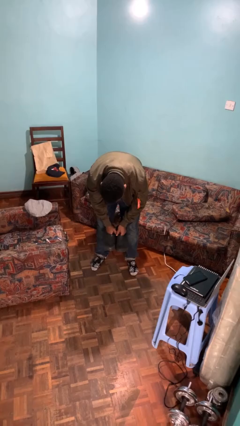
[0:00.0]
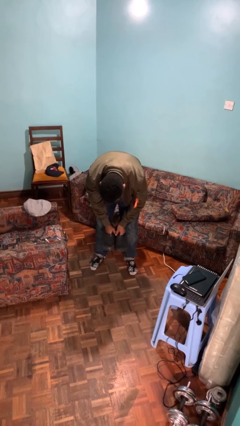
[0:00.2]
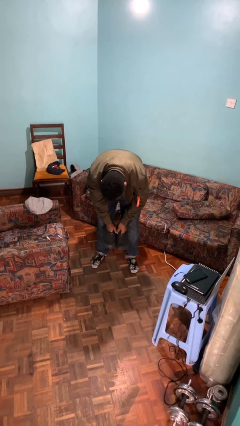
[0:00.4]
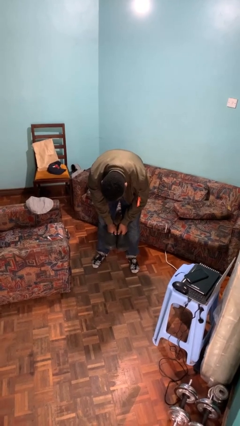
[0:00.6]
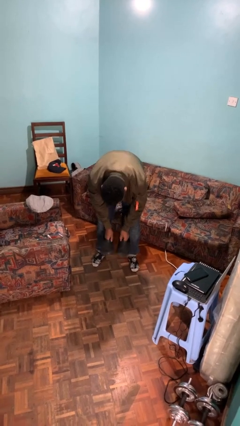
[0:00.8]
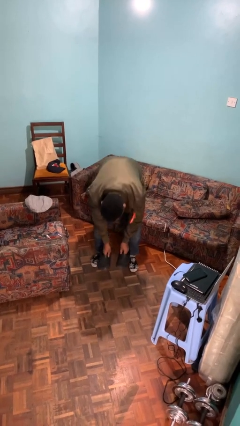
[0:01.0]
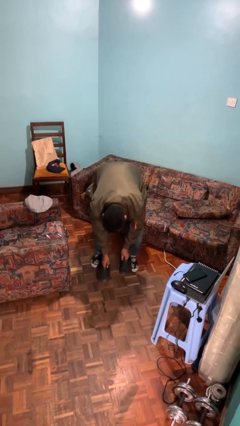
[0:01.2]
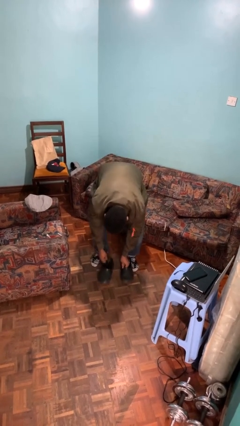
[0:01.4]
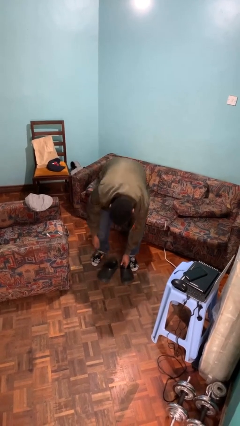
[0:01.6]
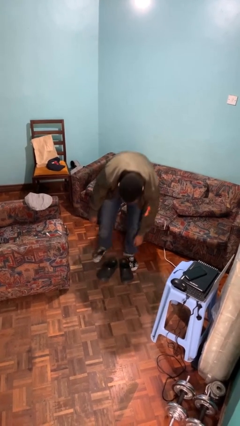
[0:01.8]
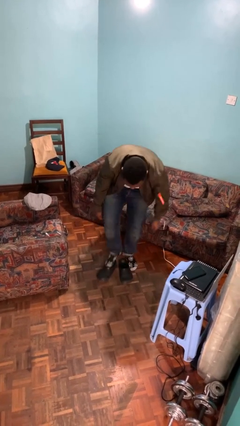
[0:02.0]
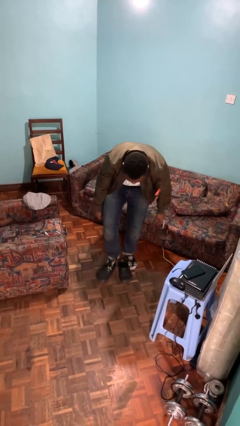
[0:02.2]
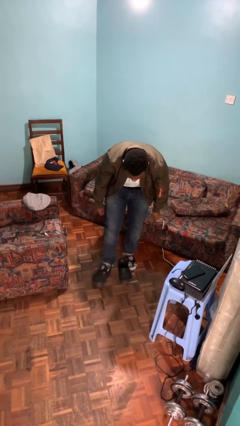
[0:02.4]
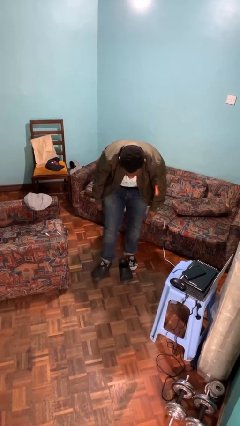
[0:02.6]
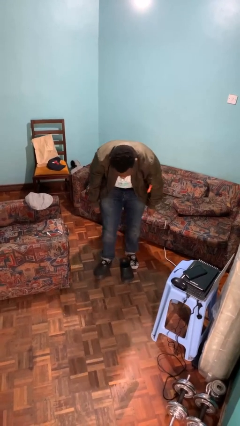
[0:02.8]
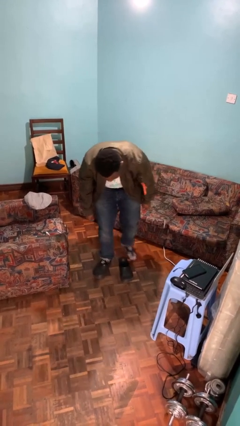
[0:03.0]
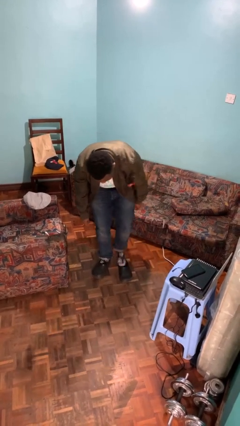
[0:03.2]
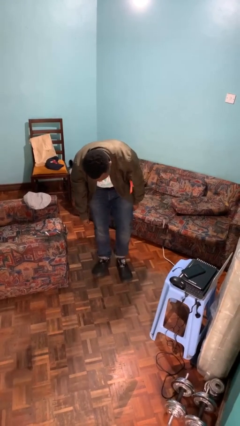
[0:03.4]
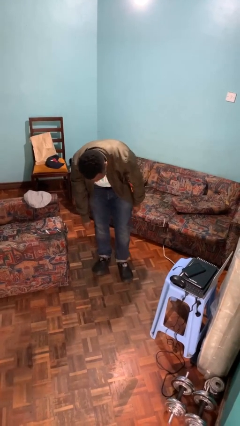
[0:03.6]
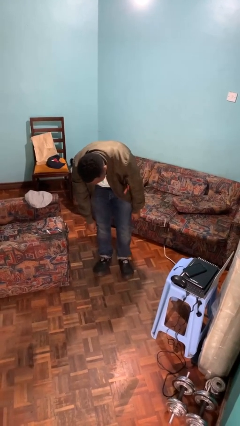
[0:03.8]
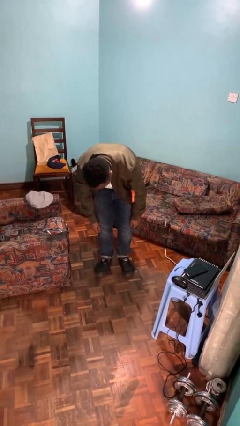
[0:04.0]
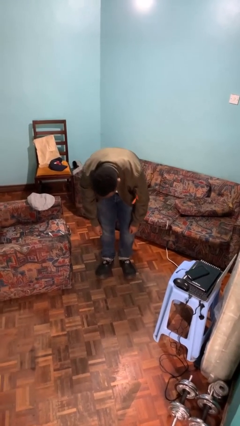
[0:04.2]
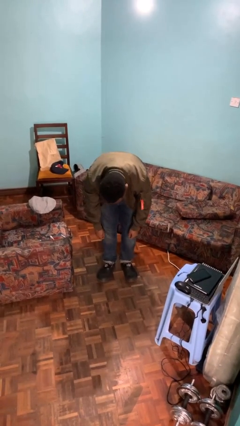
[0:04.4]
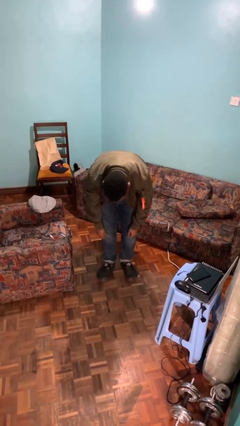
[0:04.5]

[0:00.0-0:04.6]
person puts on shoes

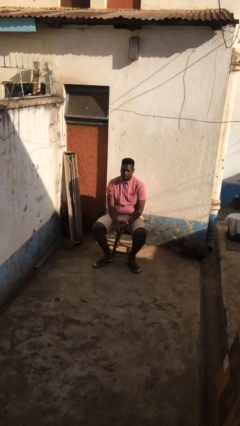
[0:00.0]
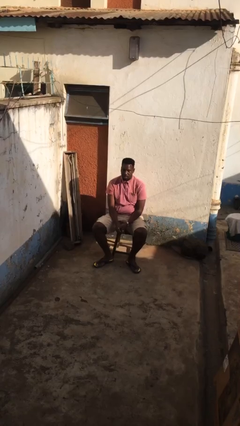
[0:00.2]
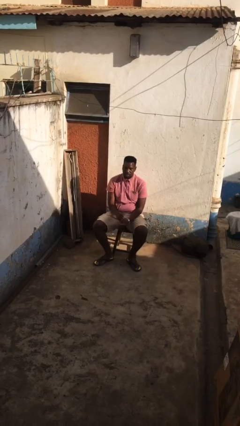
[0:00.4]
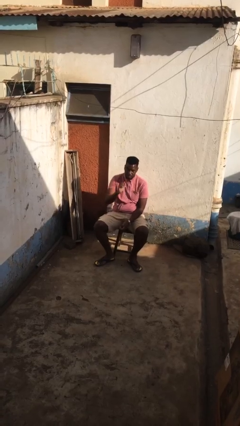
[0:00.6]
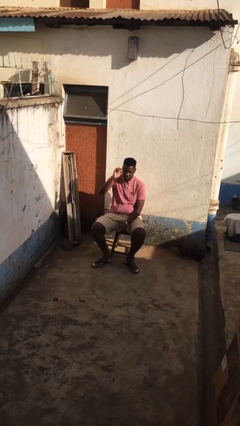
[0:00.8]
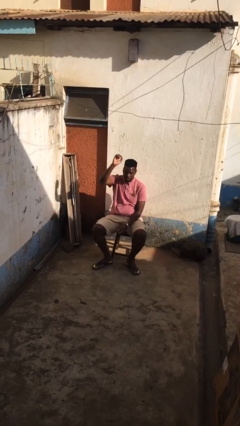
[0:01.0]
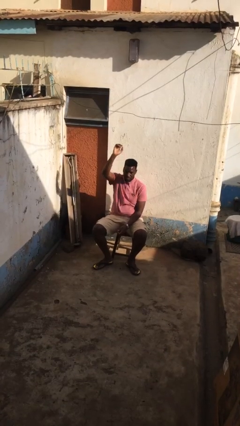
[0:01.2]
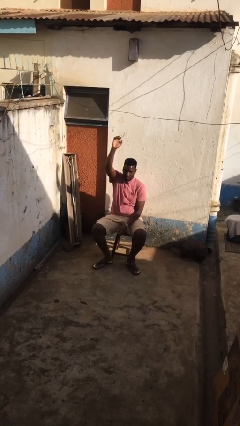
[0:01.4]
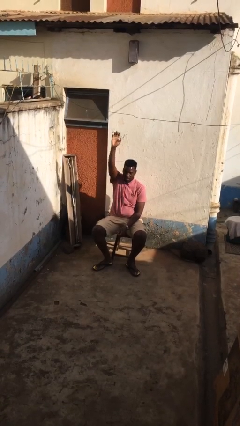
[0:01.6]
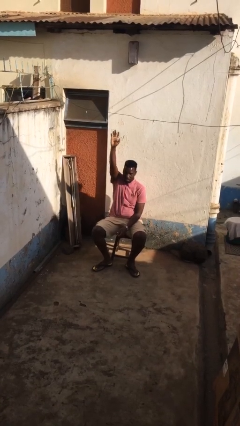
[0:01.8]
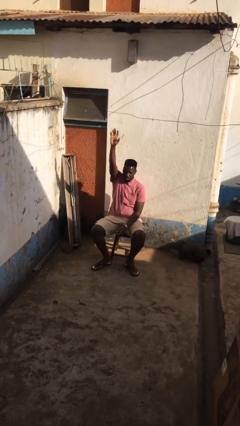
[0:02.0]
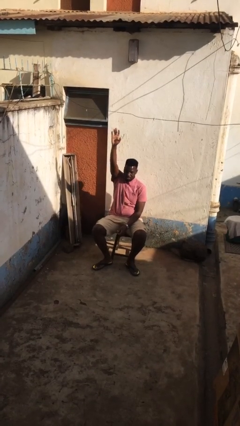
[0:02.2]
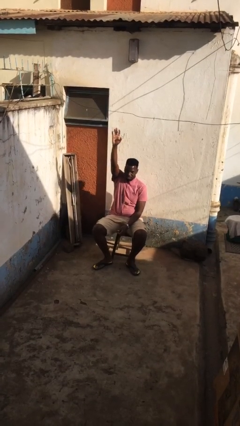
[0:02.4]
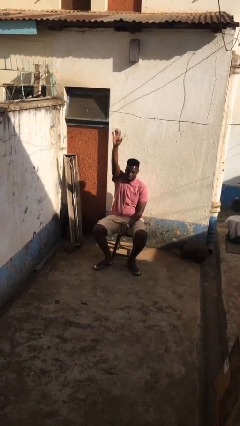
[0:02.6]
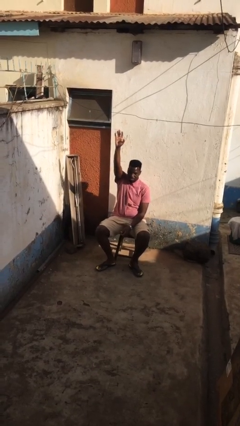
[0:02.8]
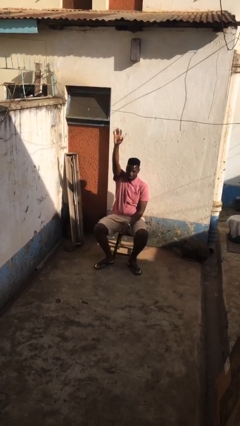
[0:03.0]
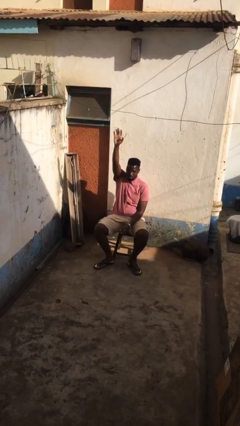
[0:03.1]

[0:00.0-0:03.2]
person gestures raise hand

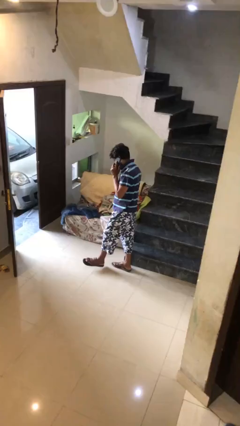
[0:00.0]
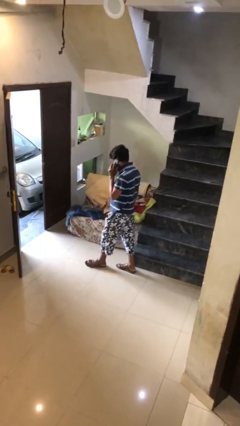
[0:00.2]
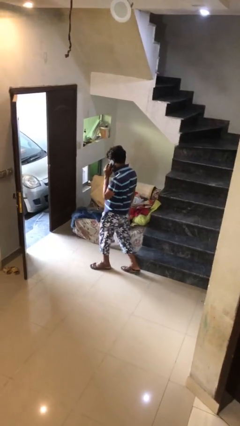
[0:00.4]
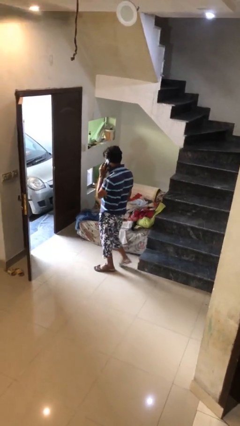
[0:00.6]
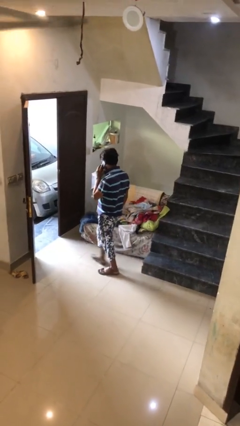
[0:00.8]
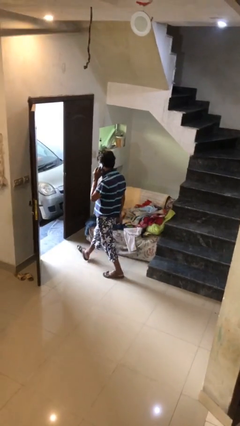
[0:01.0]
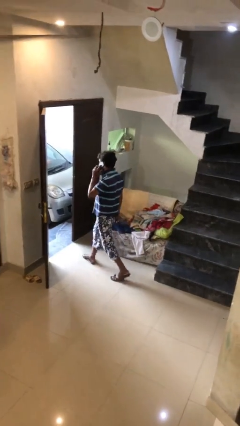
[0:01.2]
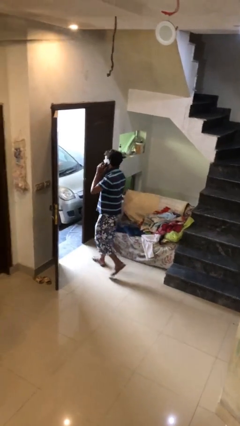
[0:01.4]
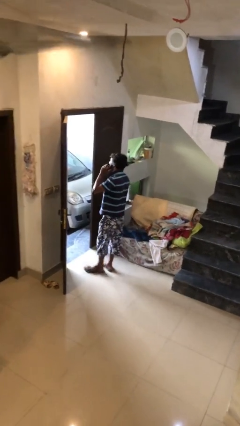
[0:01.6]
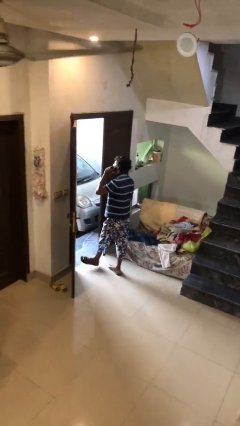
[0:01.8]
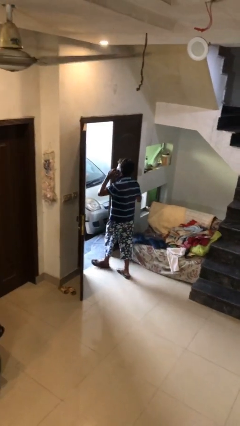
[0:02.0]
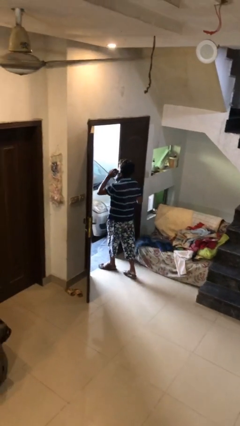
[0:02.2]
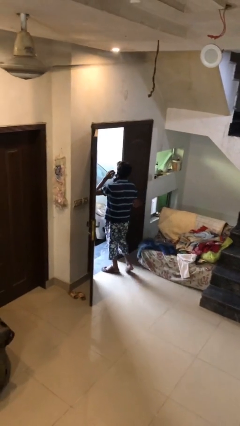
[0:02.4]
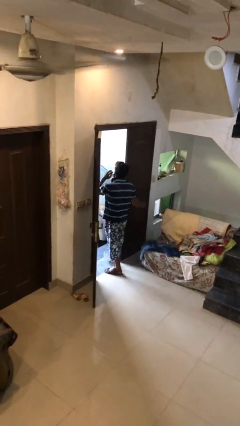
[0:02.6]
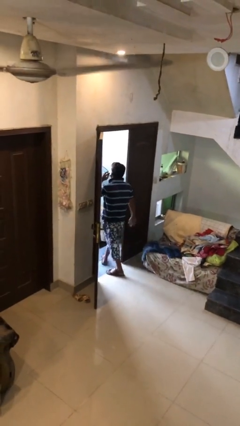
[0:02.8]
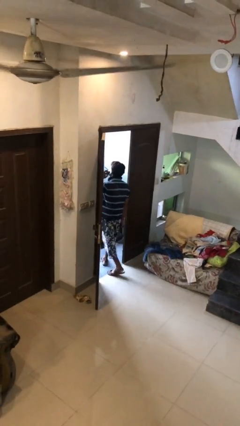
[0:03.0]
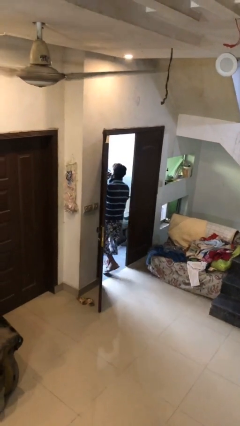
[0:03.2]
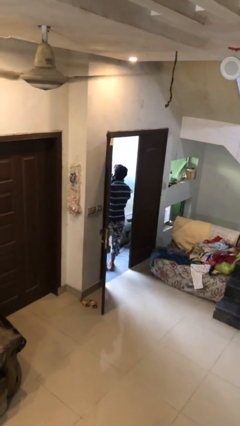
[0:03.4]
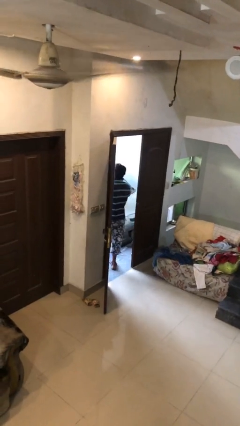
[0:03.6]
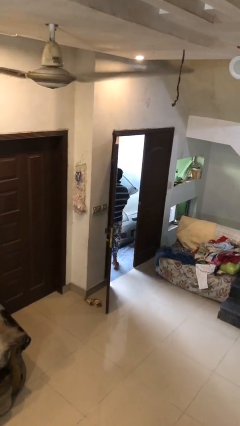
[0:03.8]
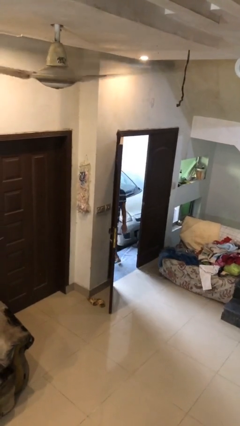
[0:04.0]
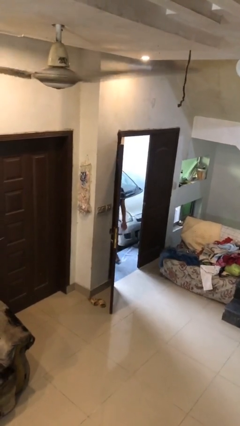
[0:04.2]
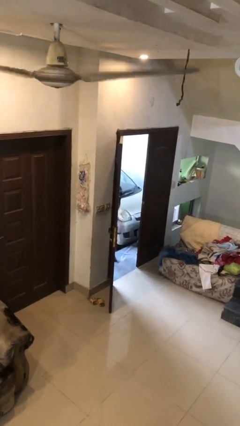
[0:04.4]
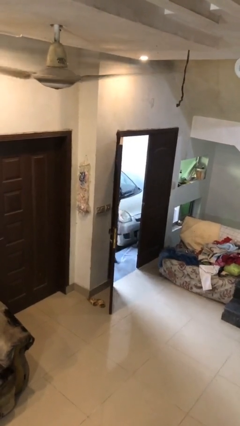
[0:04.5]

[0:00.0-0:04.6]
person exits scene through structure

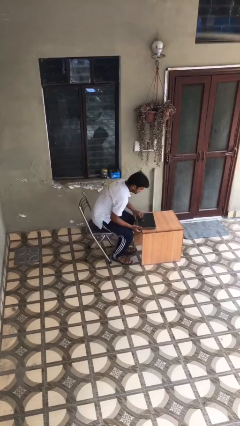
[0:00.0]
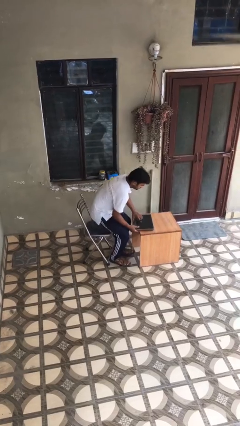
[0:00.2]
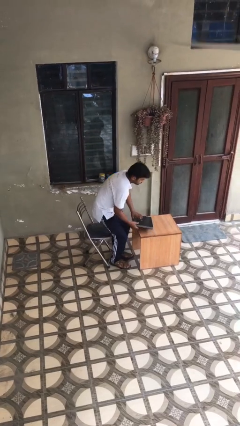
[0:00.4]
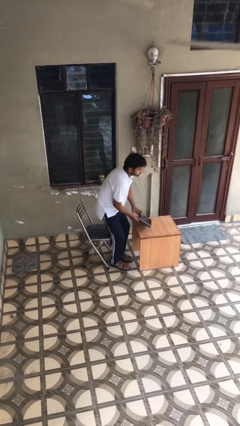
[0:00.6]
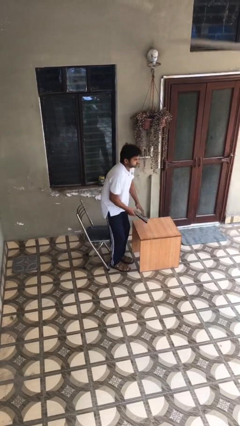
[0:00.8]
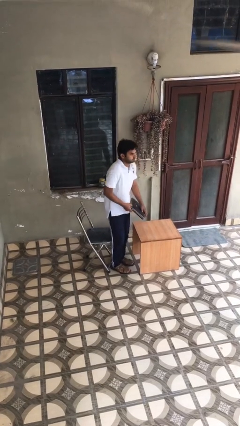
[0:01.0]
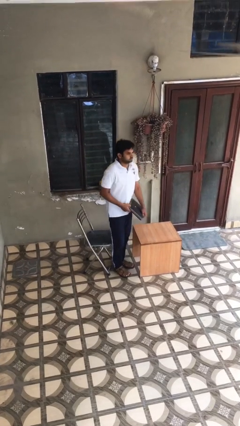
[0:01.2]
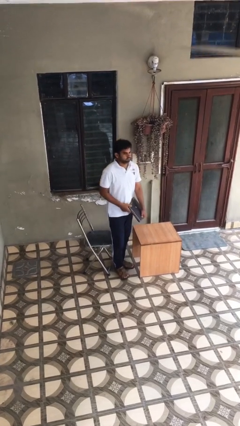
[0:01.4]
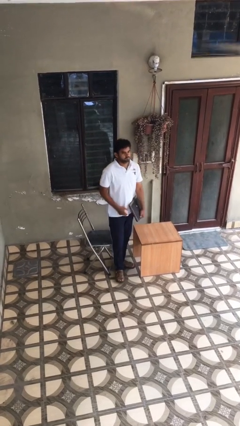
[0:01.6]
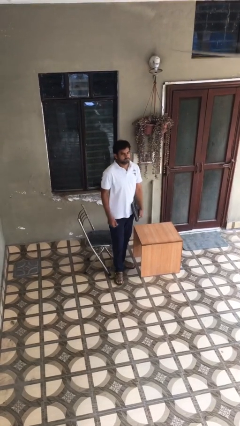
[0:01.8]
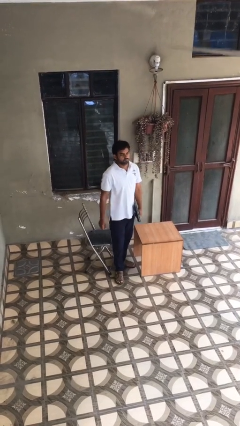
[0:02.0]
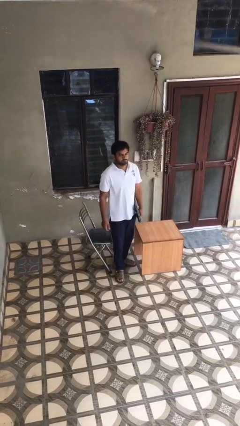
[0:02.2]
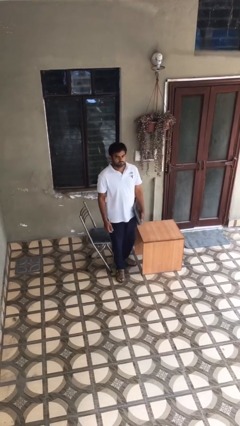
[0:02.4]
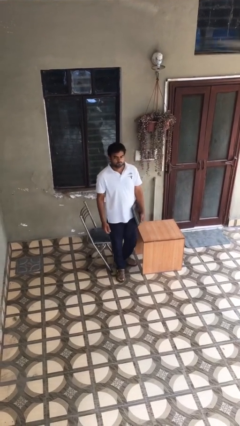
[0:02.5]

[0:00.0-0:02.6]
person stands up

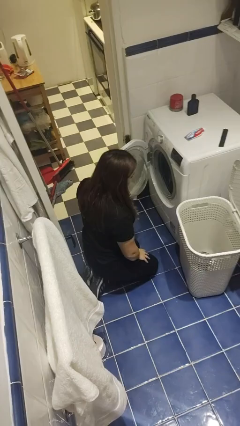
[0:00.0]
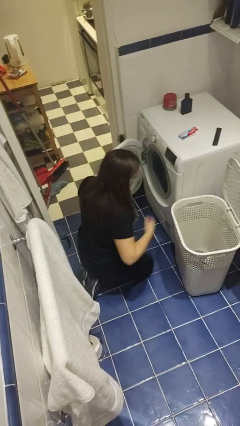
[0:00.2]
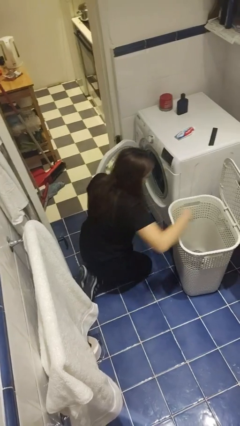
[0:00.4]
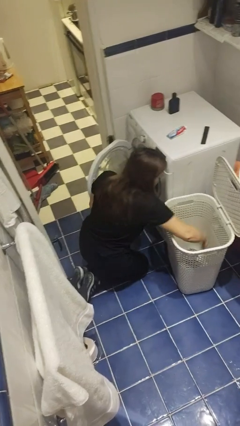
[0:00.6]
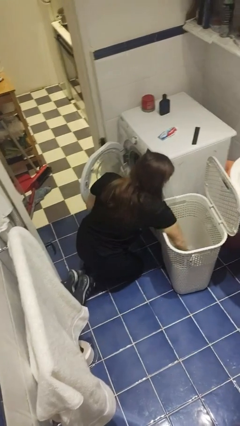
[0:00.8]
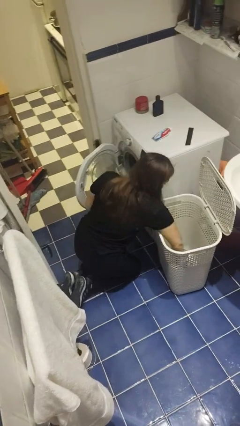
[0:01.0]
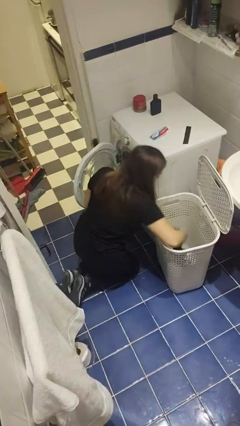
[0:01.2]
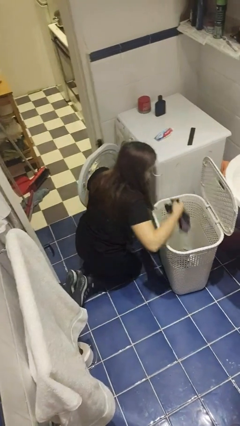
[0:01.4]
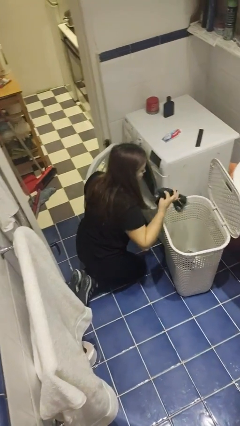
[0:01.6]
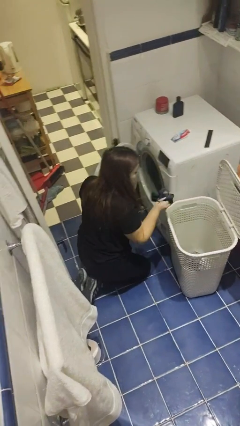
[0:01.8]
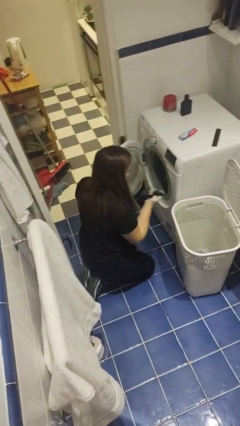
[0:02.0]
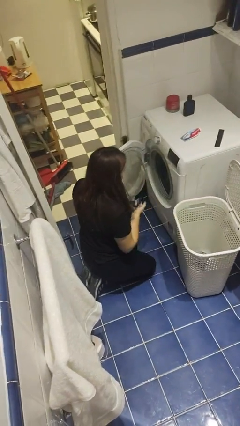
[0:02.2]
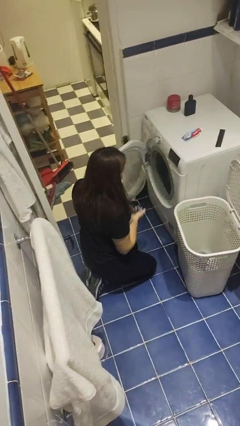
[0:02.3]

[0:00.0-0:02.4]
person unloads clotheswasher

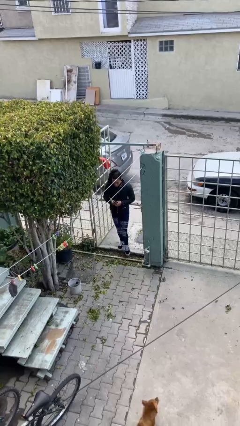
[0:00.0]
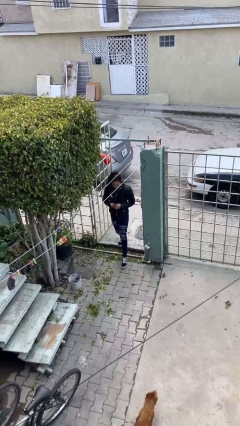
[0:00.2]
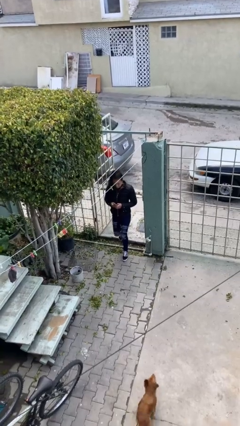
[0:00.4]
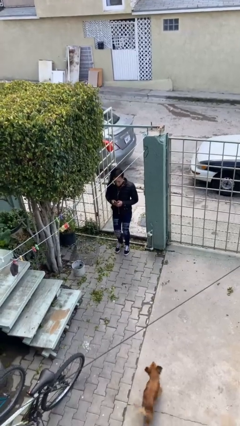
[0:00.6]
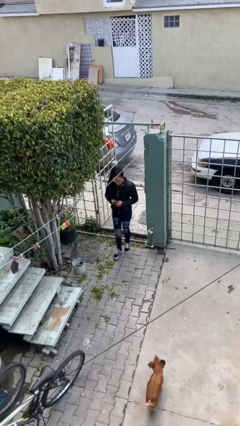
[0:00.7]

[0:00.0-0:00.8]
person enters scene through structure
